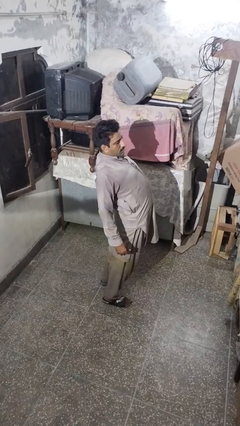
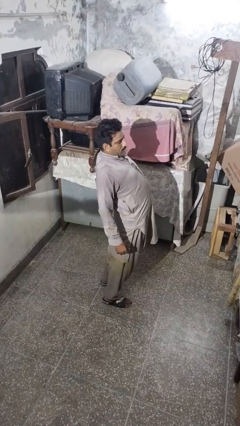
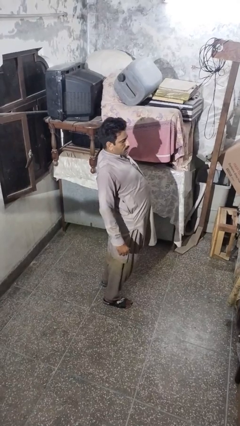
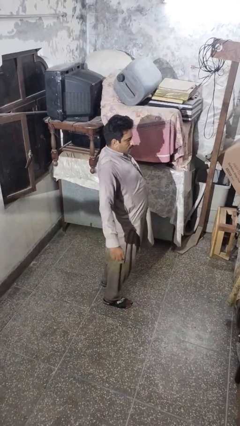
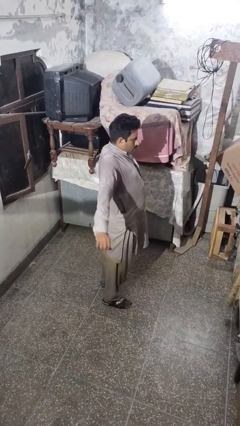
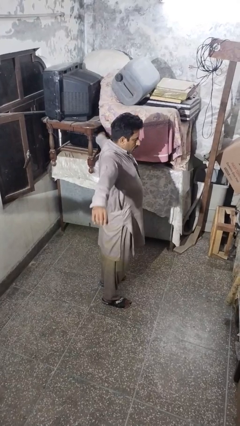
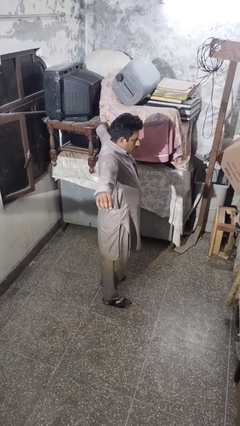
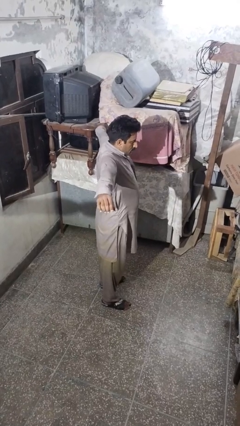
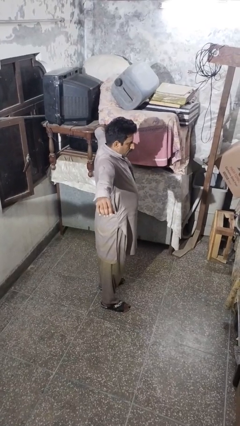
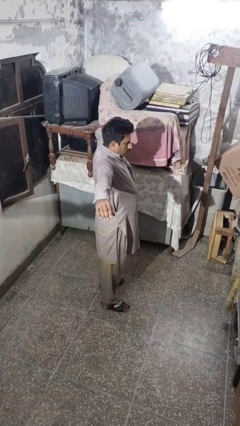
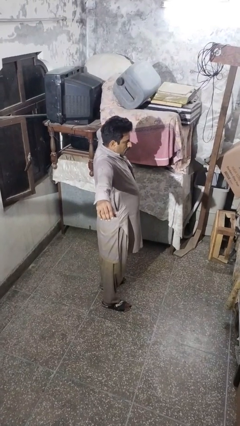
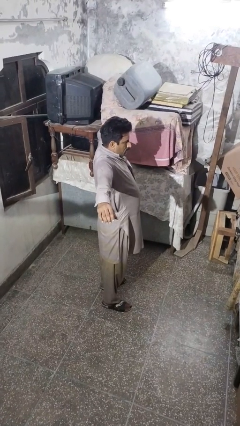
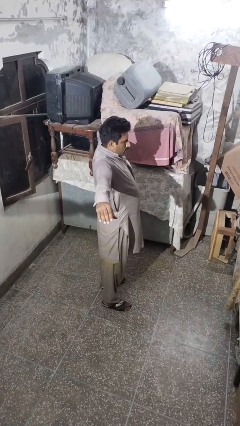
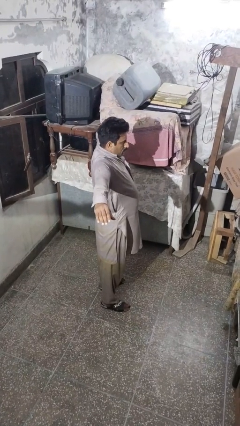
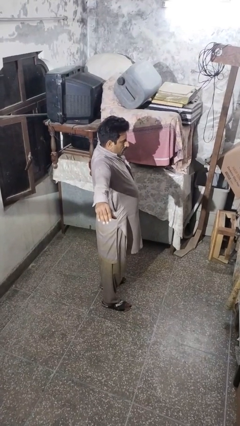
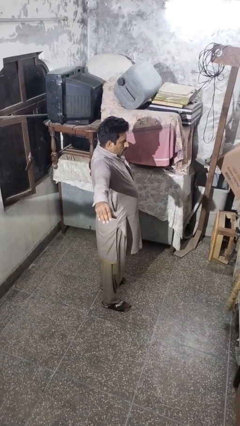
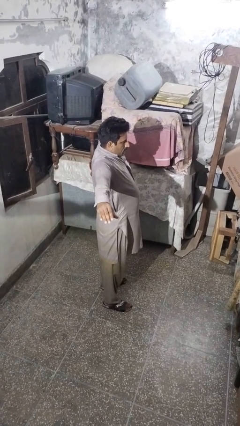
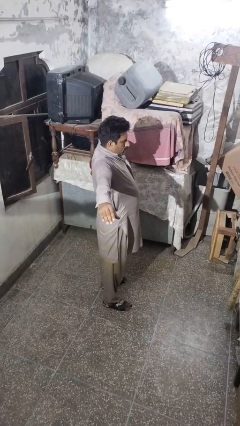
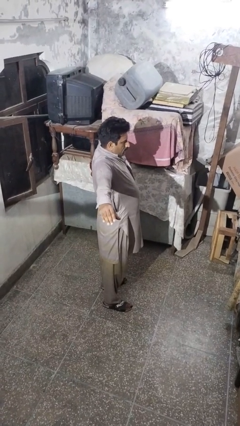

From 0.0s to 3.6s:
person stretches arms to side

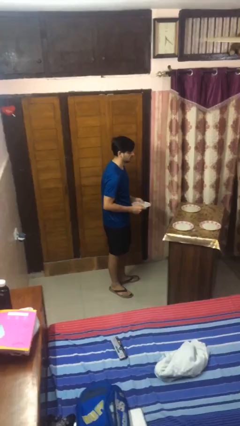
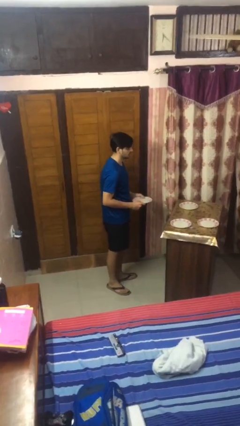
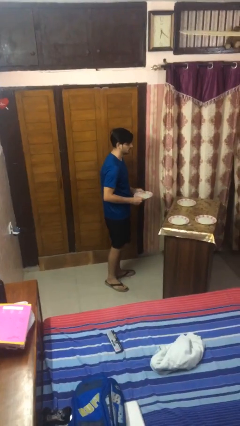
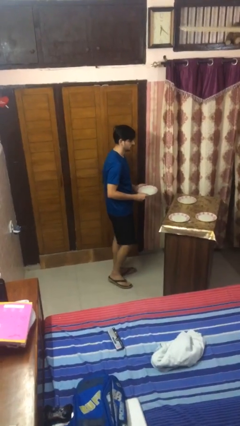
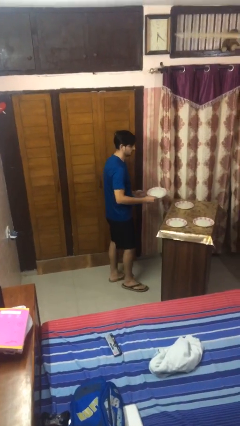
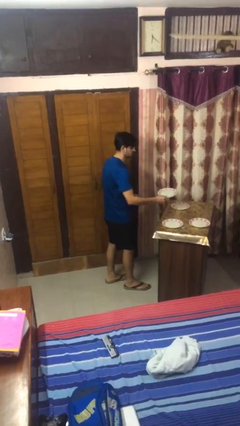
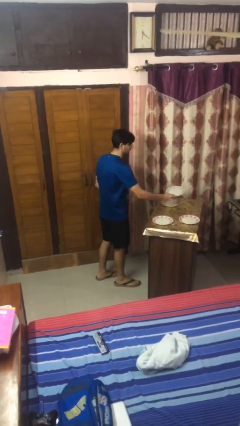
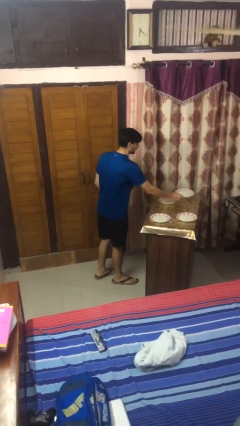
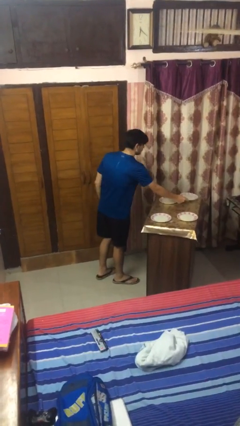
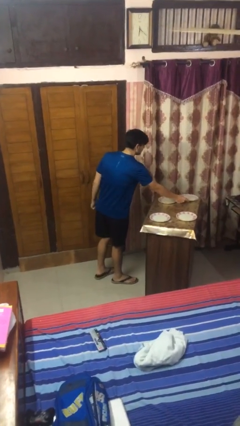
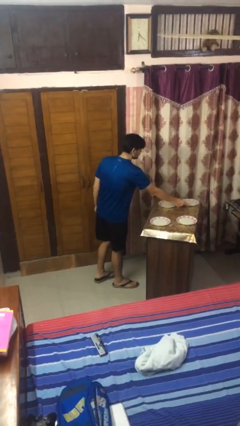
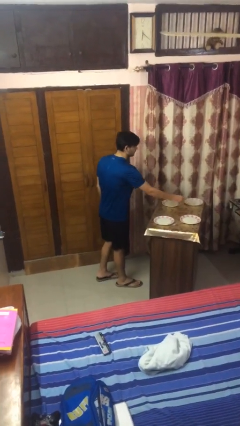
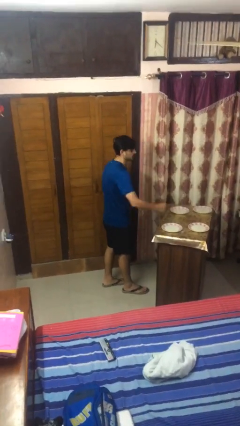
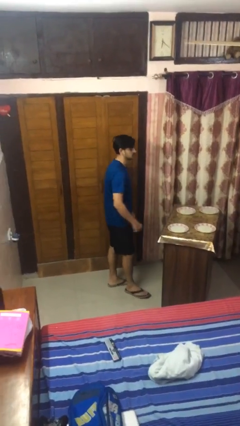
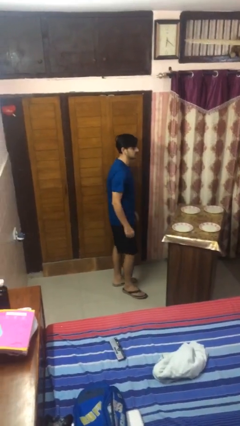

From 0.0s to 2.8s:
person sets table

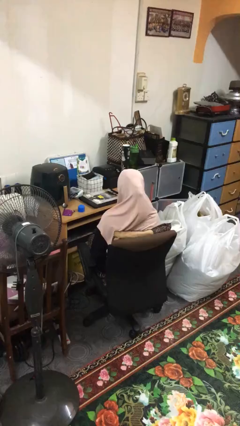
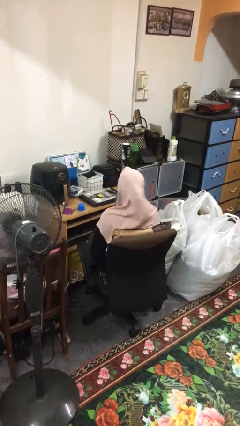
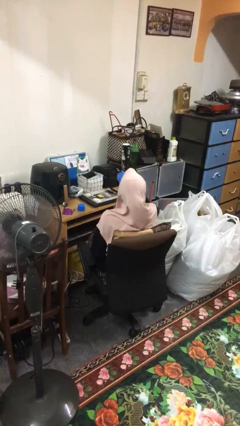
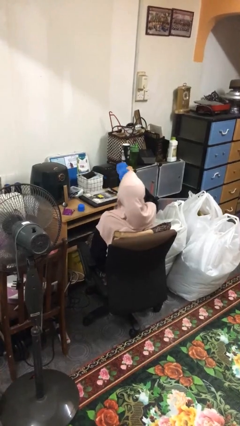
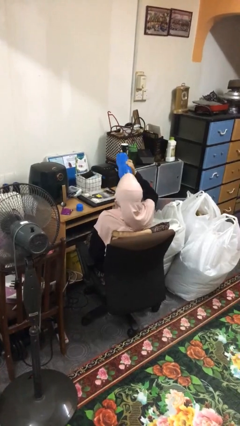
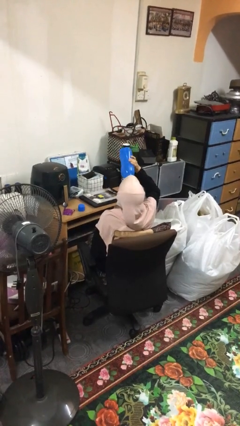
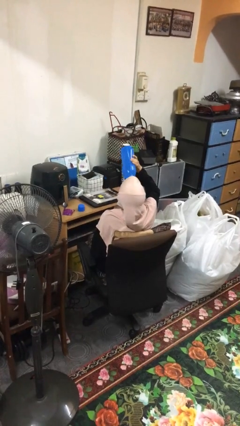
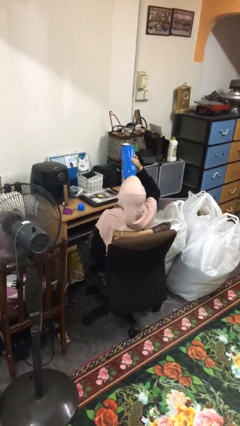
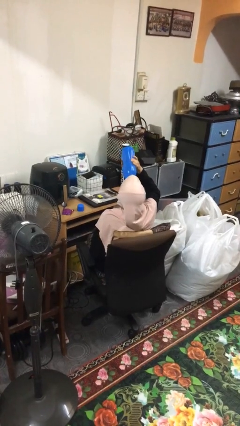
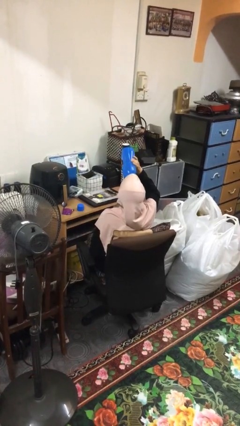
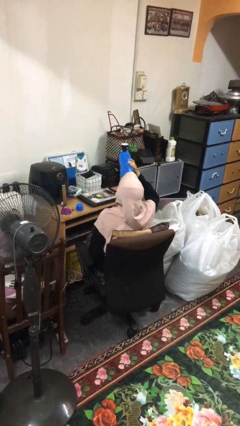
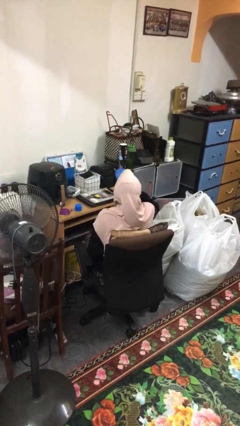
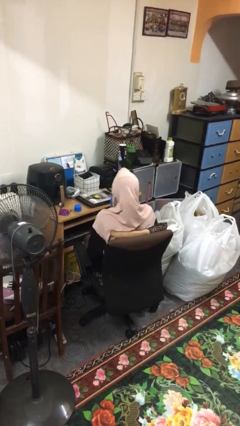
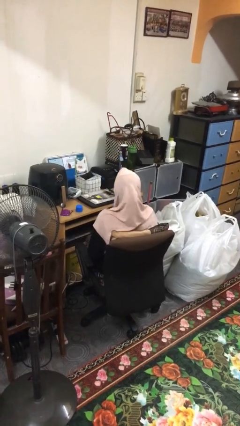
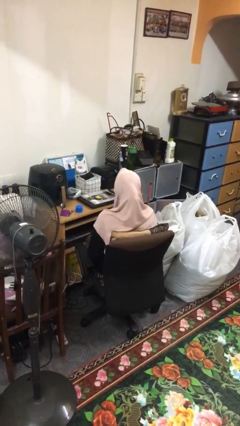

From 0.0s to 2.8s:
person drinks from bottle

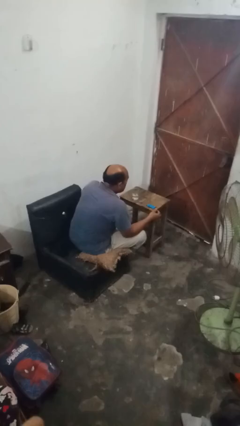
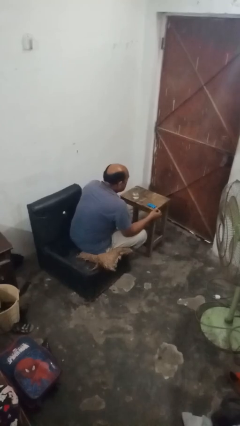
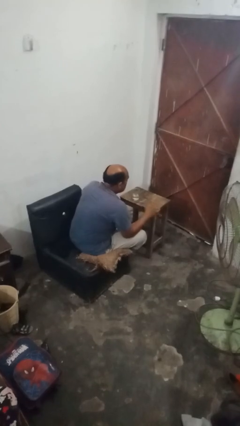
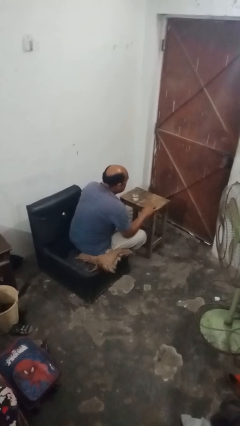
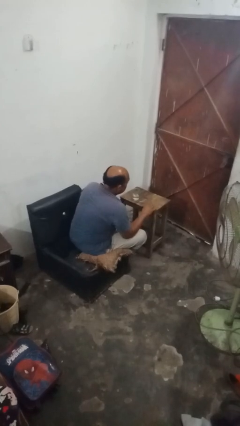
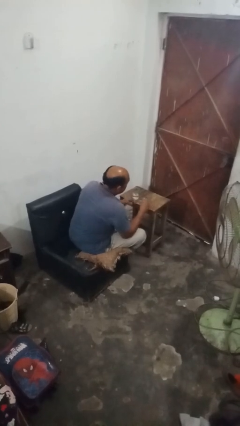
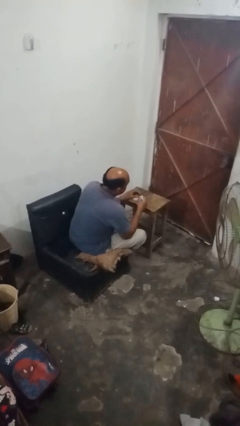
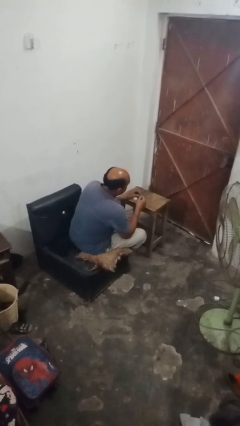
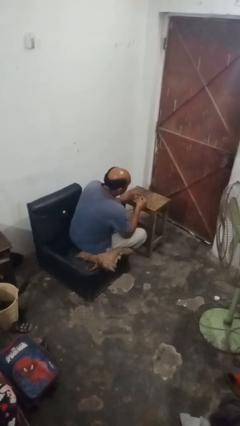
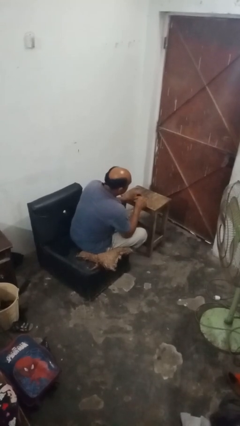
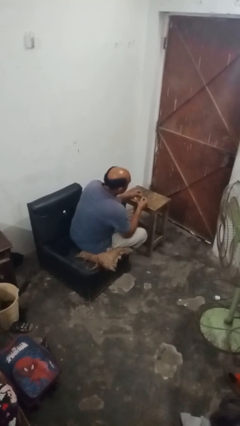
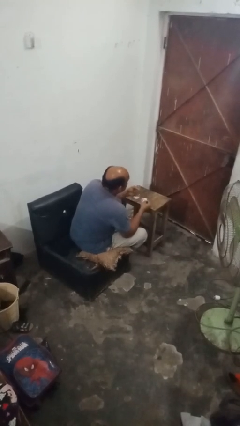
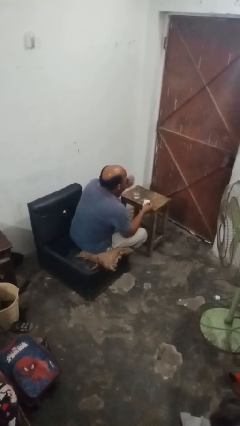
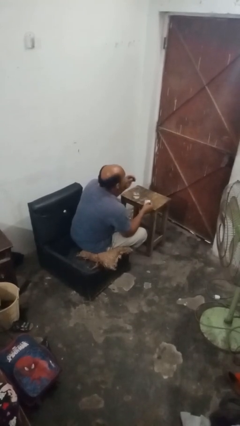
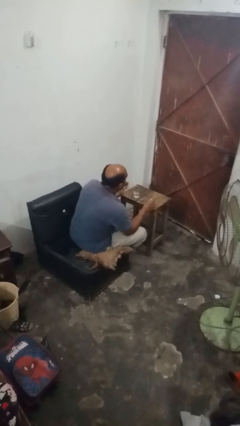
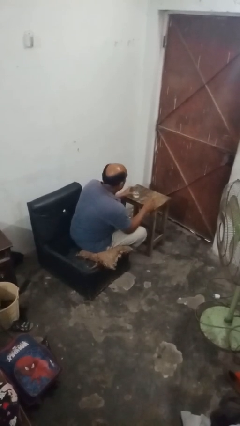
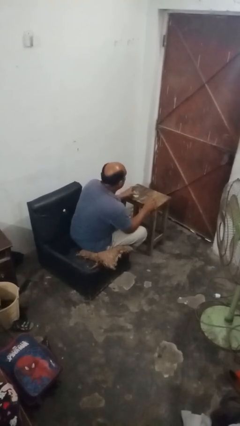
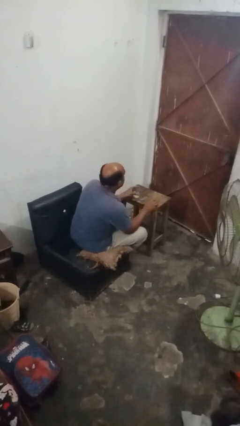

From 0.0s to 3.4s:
person takes medicine pills

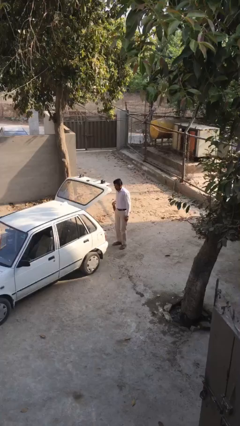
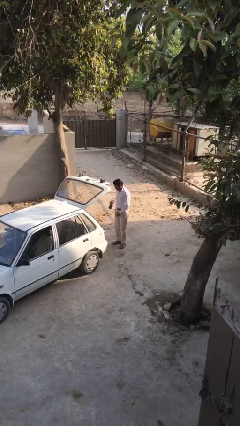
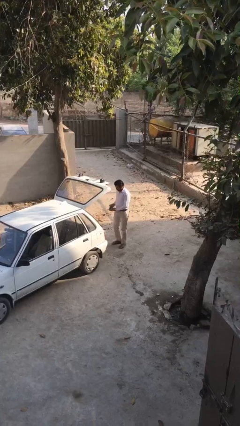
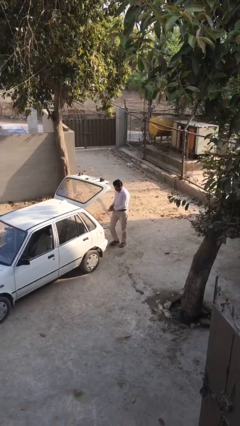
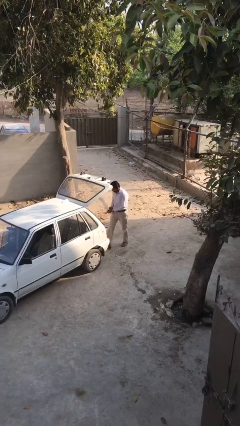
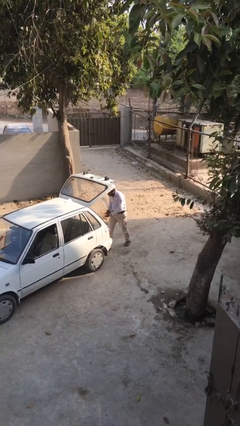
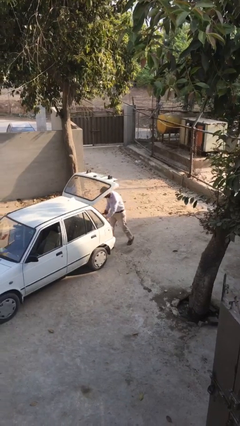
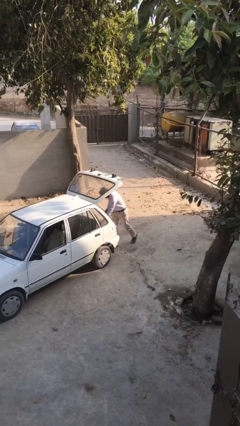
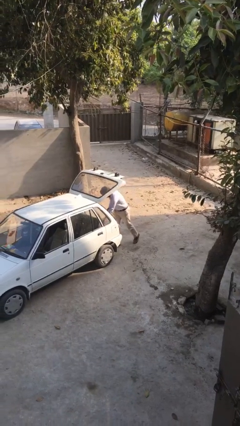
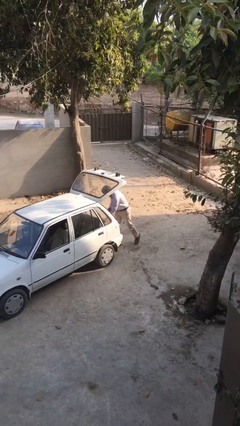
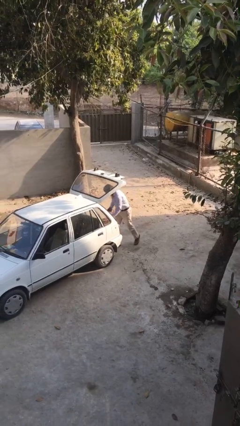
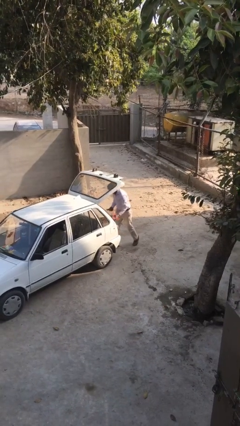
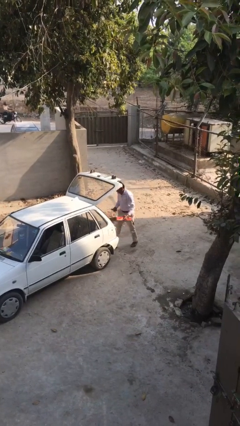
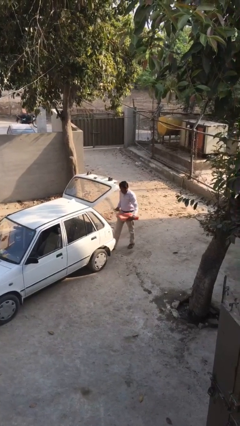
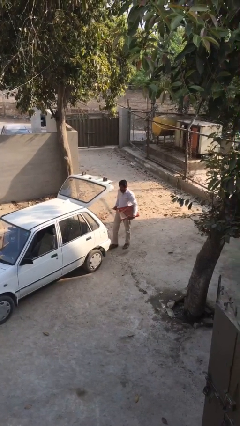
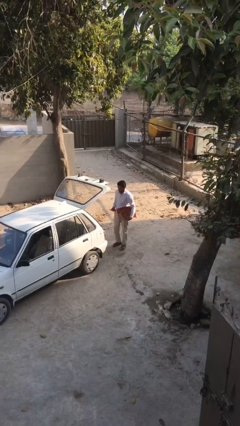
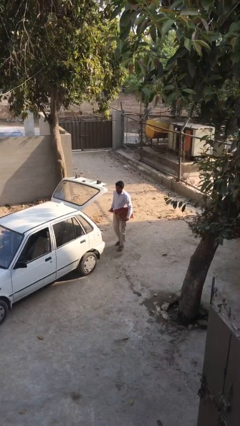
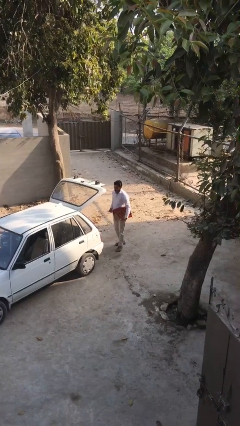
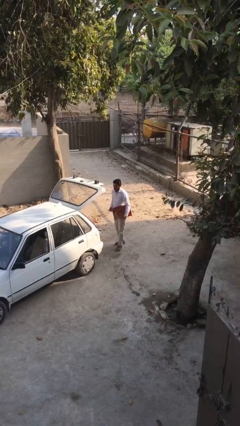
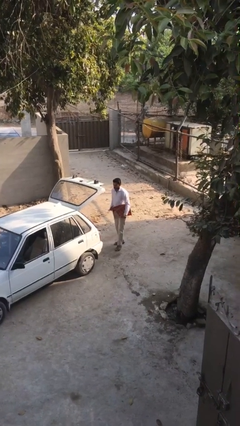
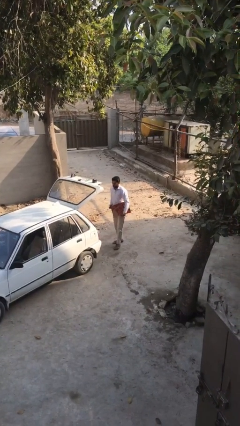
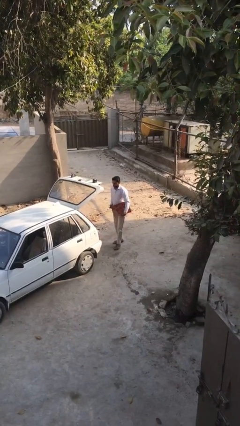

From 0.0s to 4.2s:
person unloads car

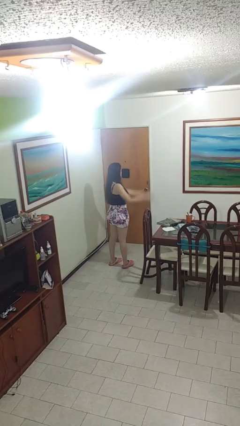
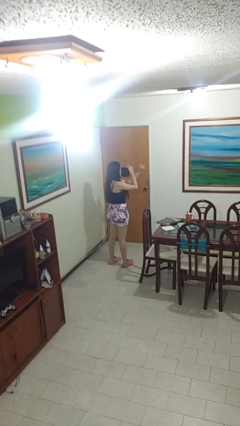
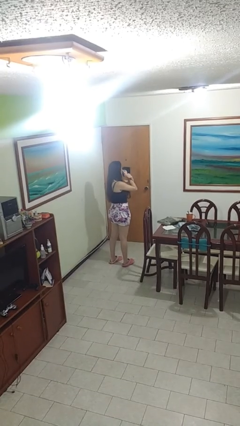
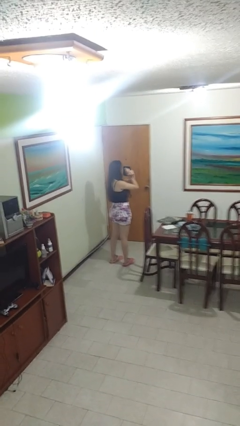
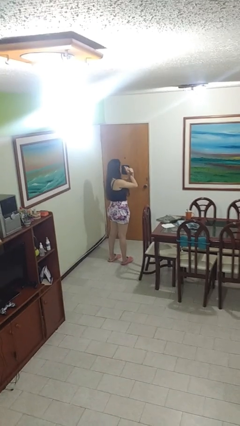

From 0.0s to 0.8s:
person gestures arms x
